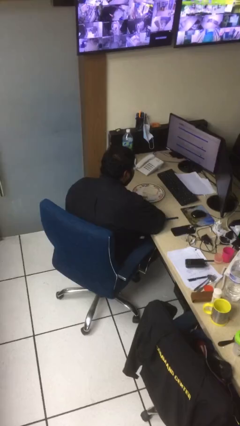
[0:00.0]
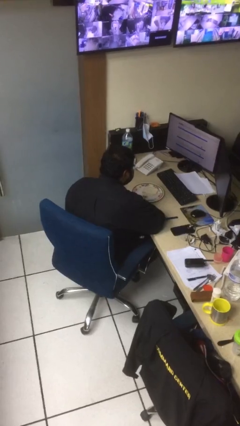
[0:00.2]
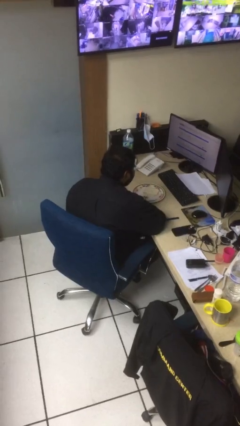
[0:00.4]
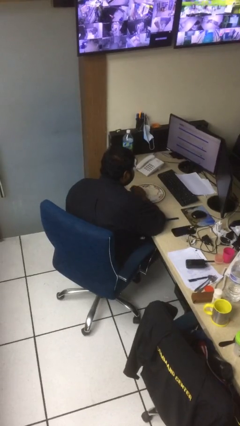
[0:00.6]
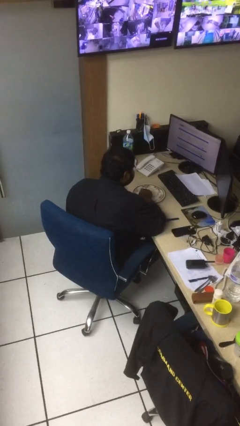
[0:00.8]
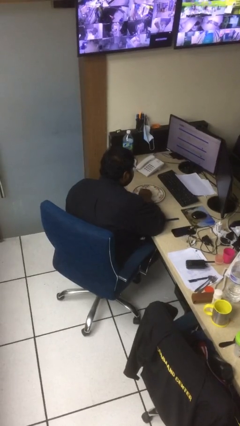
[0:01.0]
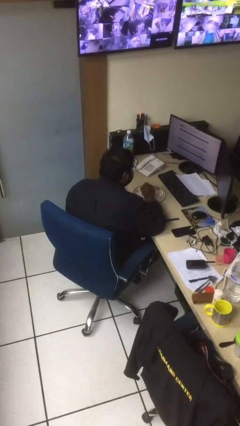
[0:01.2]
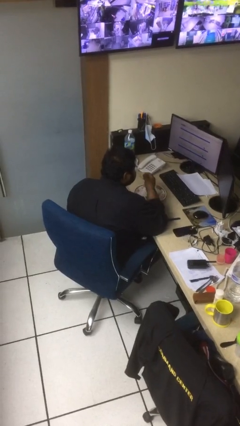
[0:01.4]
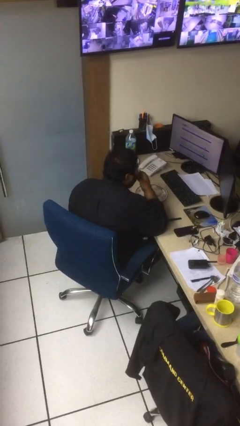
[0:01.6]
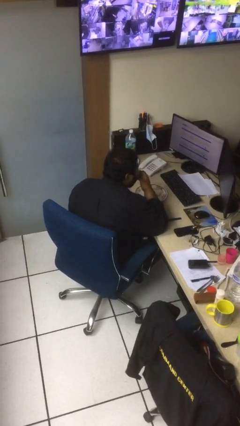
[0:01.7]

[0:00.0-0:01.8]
person eats with hands

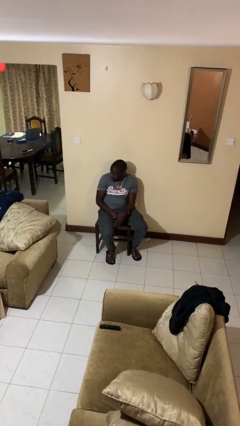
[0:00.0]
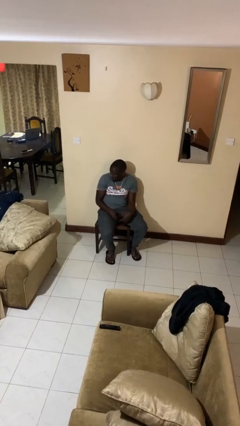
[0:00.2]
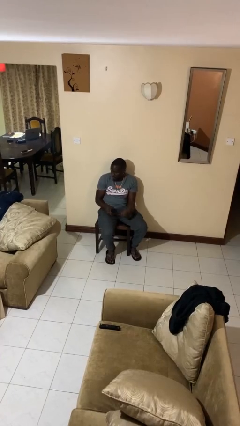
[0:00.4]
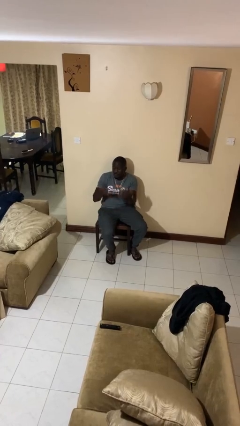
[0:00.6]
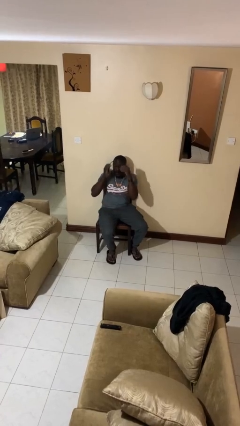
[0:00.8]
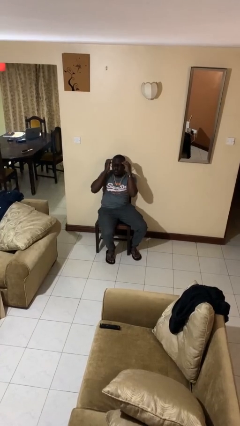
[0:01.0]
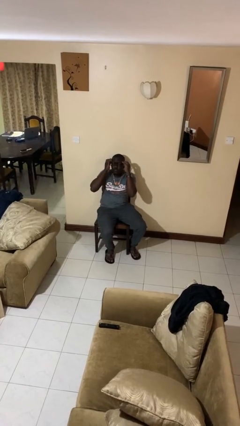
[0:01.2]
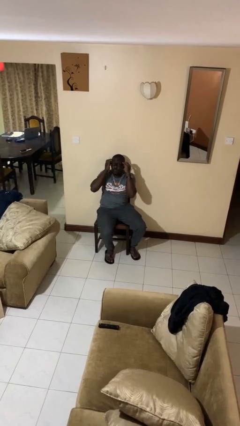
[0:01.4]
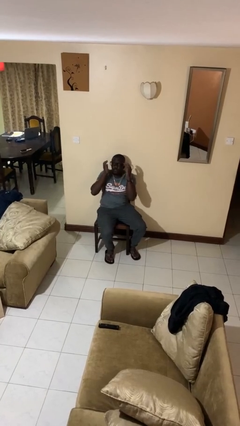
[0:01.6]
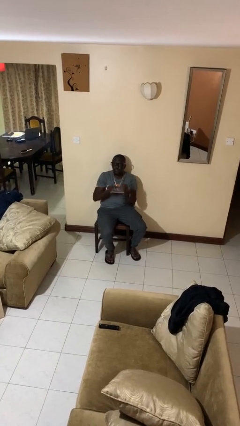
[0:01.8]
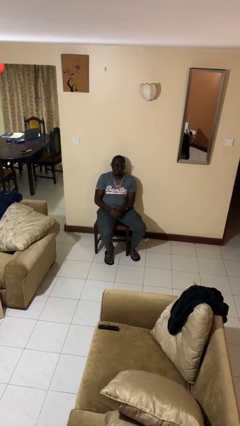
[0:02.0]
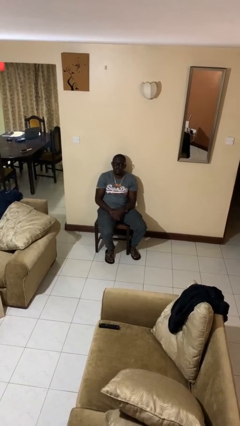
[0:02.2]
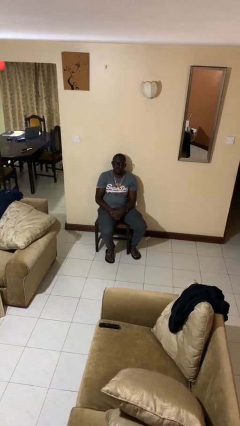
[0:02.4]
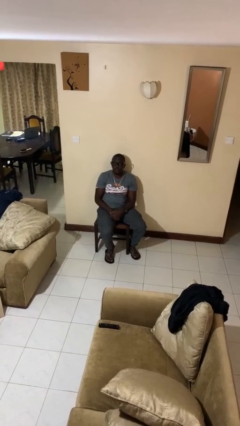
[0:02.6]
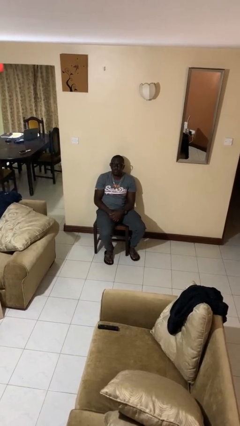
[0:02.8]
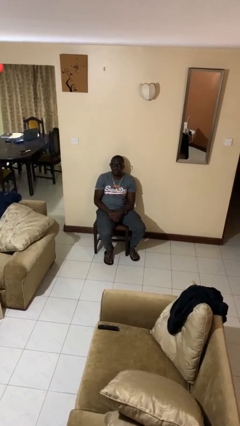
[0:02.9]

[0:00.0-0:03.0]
person puts on glasses

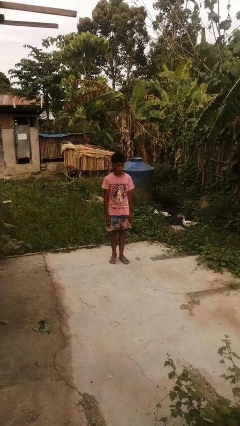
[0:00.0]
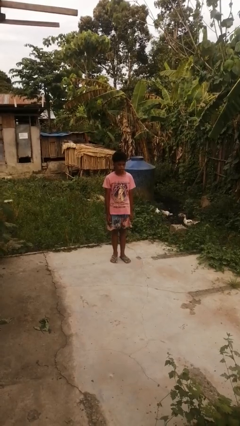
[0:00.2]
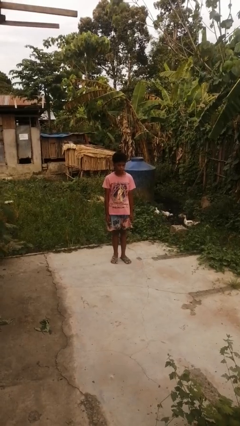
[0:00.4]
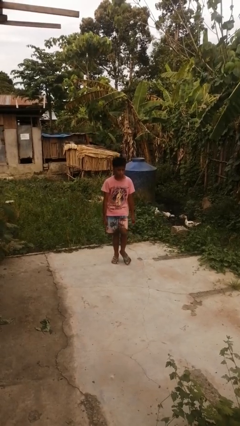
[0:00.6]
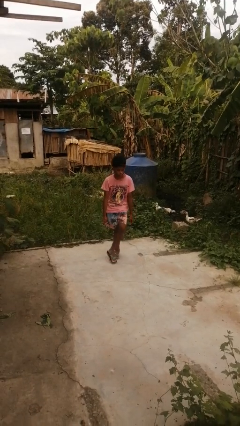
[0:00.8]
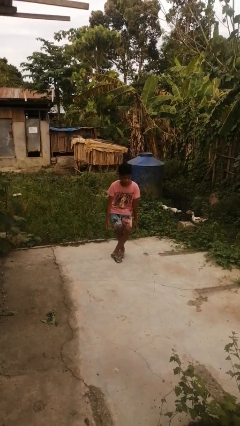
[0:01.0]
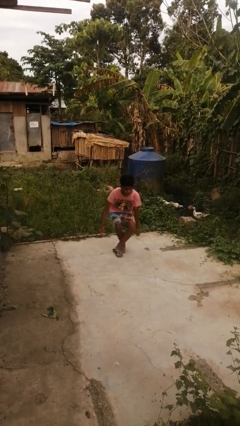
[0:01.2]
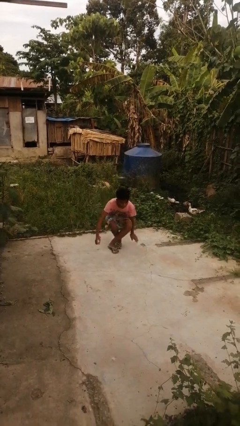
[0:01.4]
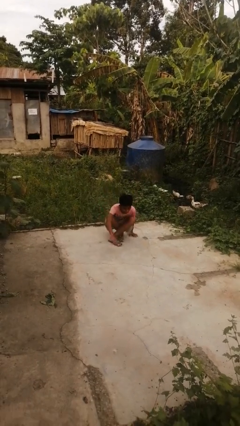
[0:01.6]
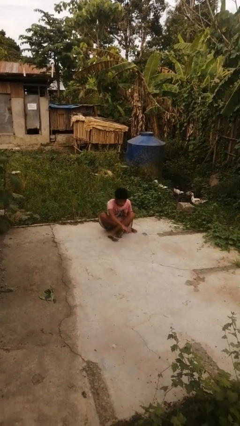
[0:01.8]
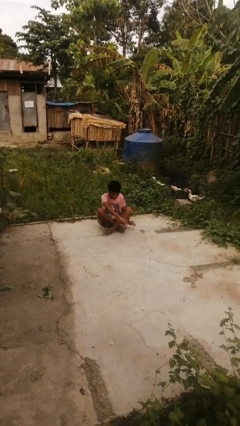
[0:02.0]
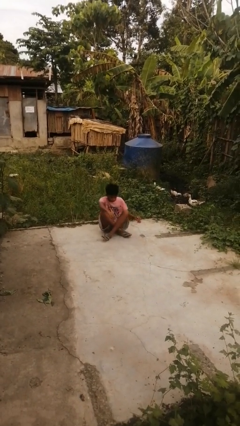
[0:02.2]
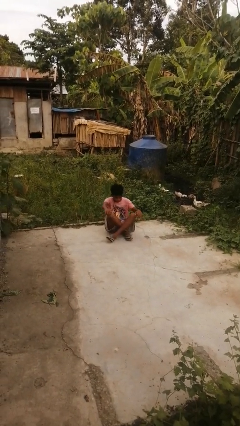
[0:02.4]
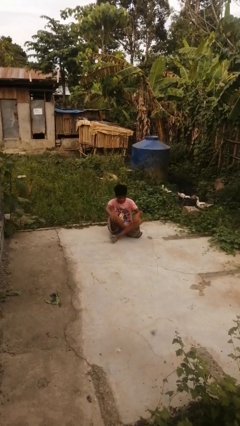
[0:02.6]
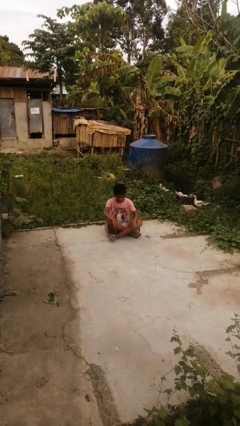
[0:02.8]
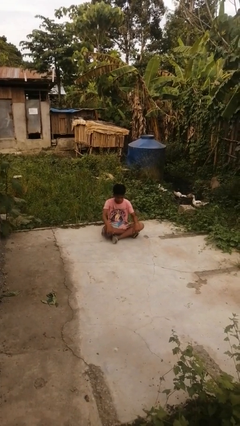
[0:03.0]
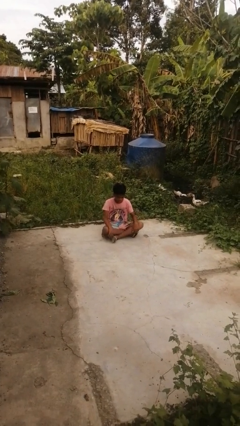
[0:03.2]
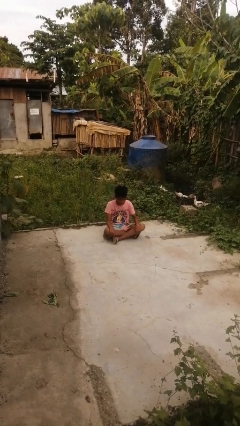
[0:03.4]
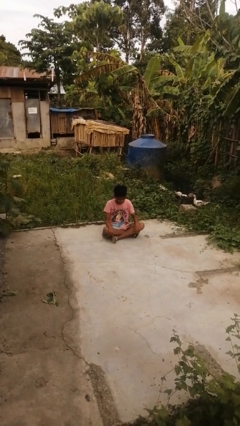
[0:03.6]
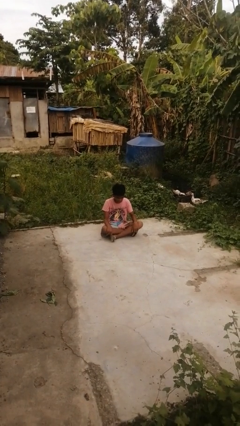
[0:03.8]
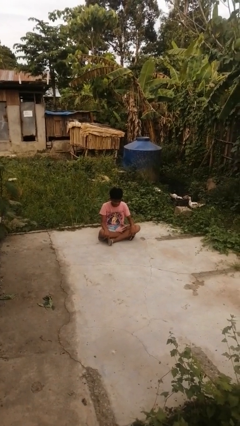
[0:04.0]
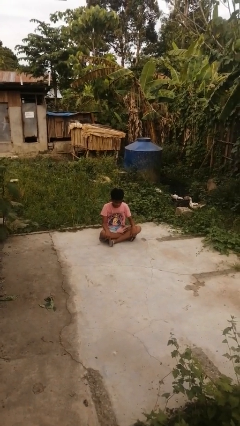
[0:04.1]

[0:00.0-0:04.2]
person sits crisscross

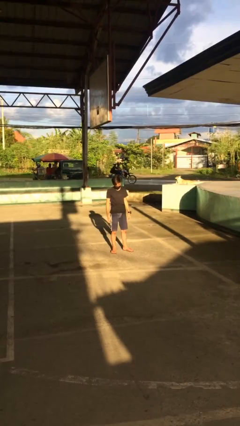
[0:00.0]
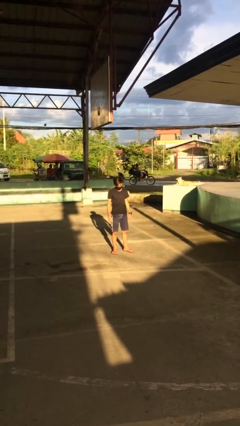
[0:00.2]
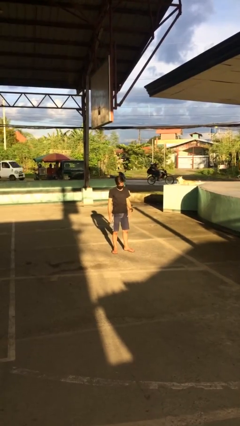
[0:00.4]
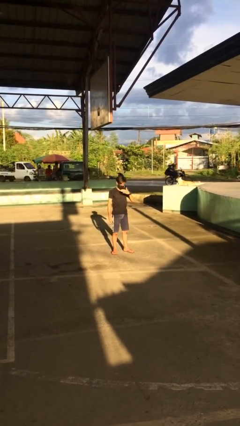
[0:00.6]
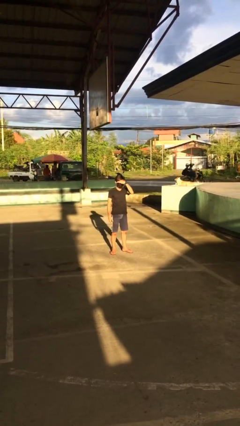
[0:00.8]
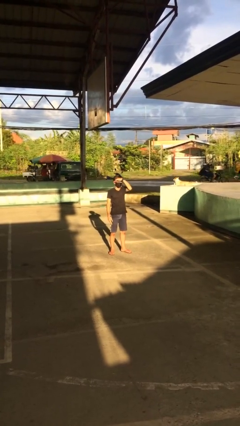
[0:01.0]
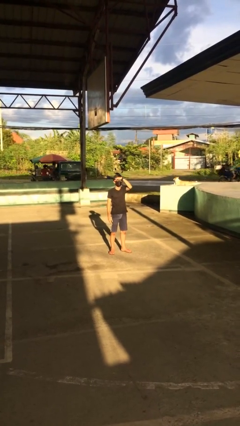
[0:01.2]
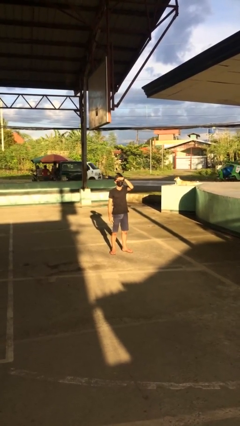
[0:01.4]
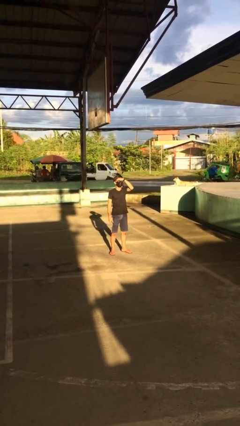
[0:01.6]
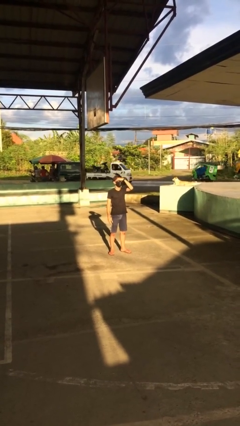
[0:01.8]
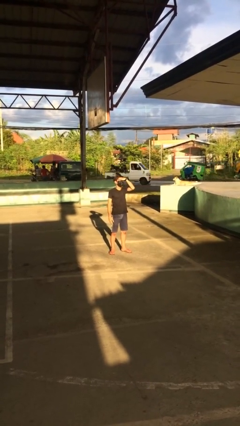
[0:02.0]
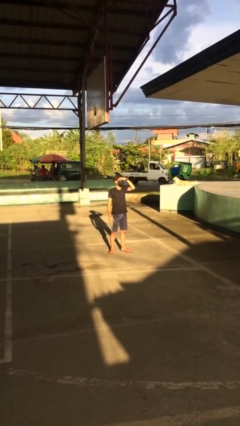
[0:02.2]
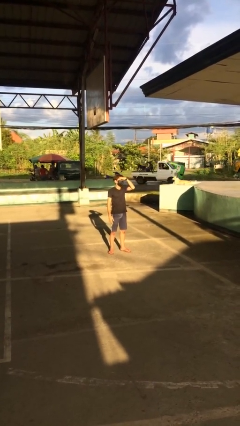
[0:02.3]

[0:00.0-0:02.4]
person shades eyes

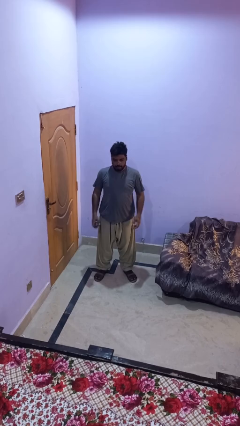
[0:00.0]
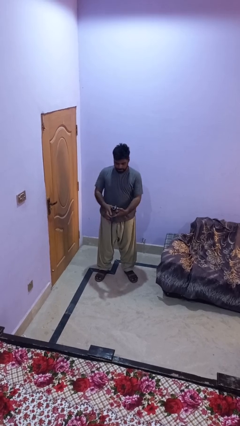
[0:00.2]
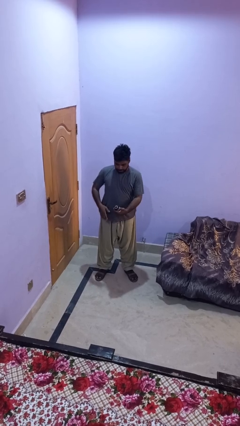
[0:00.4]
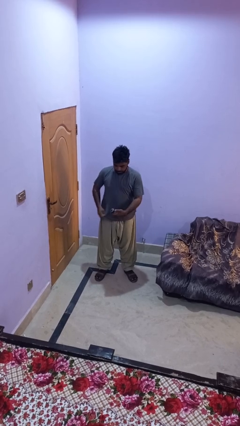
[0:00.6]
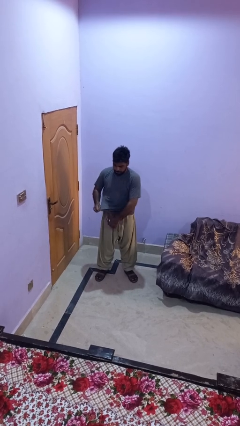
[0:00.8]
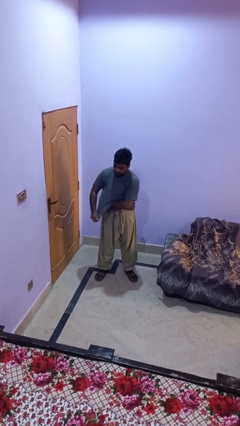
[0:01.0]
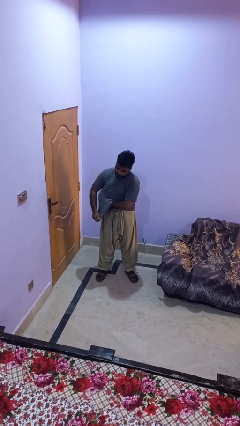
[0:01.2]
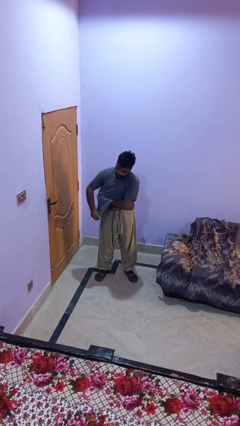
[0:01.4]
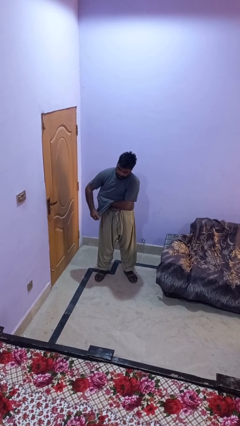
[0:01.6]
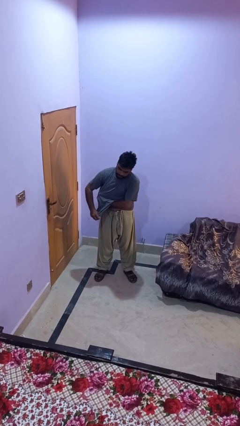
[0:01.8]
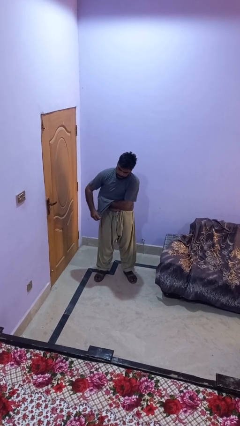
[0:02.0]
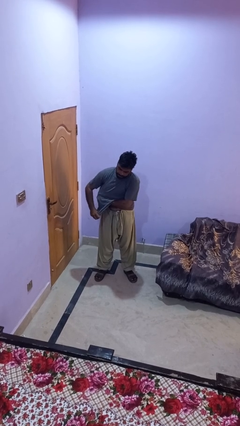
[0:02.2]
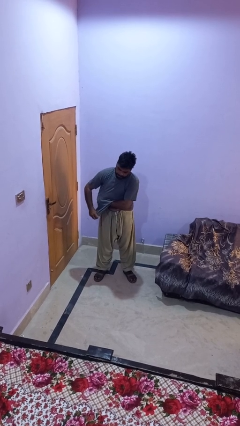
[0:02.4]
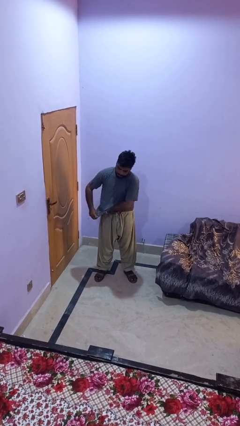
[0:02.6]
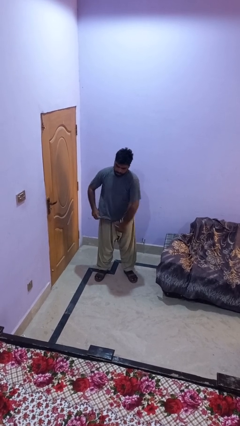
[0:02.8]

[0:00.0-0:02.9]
person applies deodorant

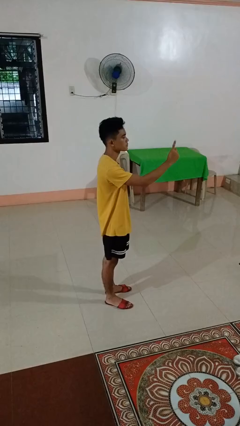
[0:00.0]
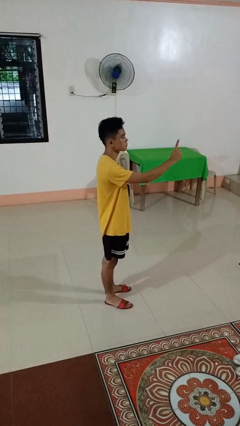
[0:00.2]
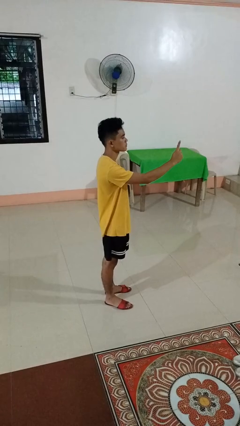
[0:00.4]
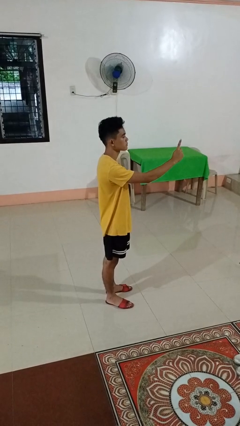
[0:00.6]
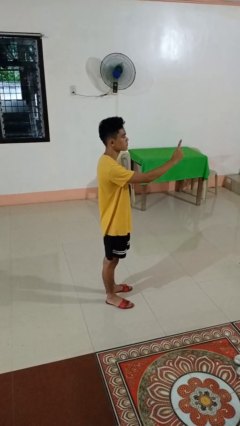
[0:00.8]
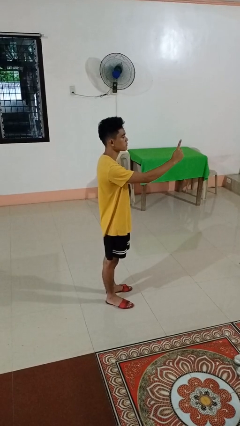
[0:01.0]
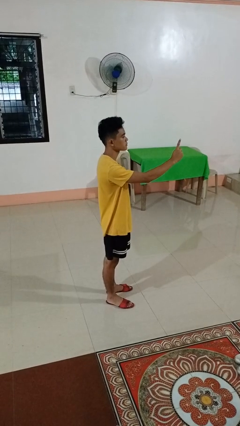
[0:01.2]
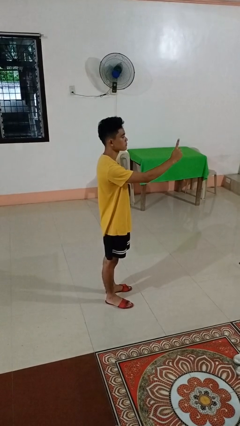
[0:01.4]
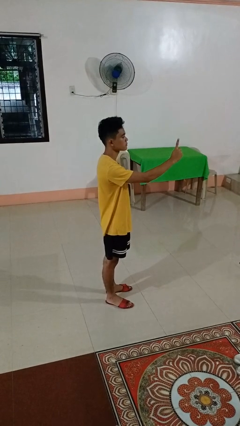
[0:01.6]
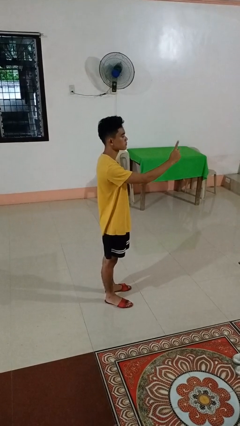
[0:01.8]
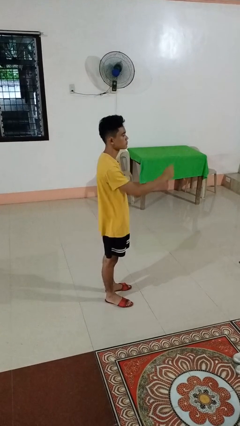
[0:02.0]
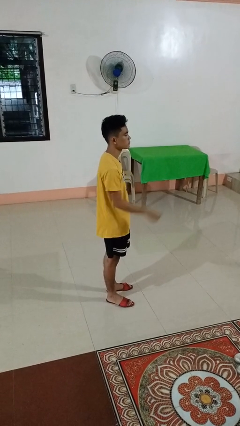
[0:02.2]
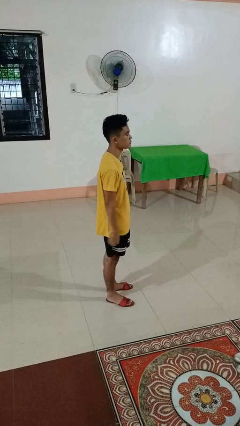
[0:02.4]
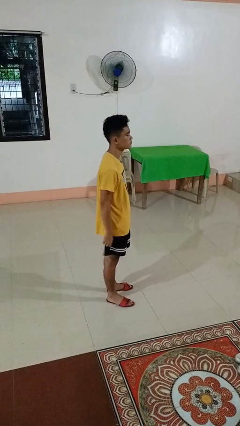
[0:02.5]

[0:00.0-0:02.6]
person gestures number one

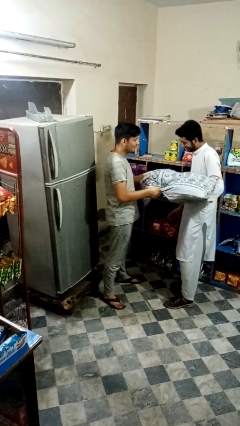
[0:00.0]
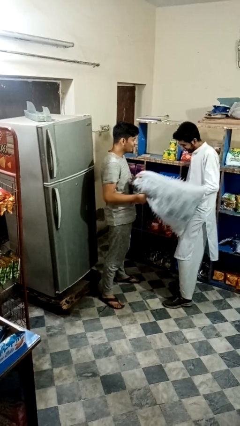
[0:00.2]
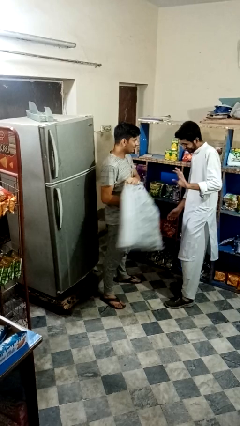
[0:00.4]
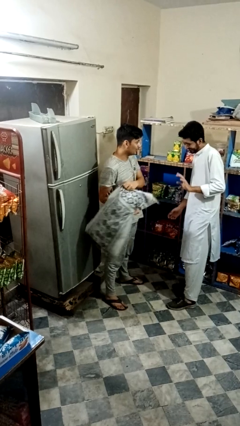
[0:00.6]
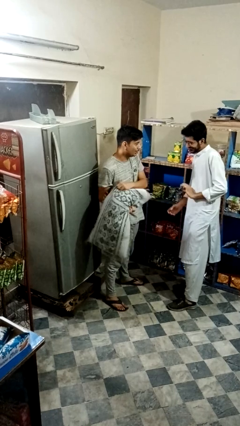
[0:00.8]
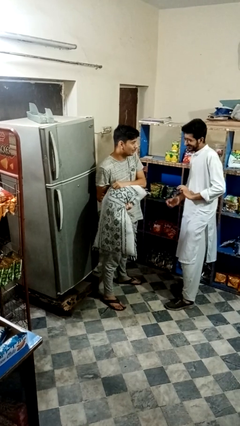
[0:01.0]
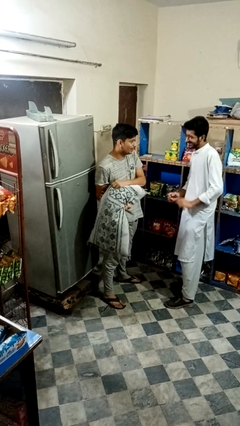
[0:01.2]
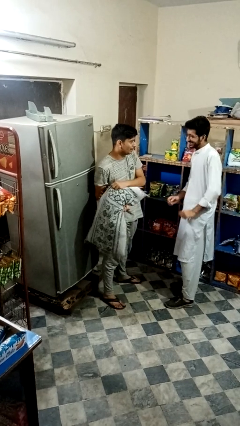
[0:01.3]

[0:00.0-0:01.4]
person hits person with pillow
